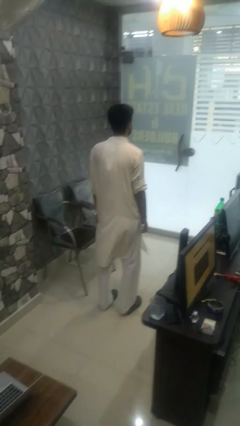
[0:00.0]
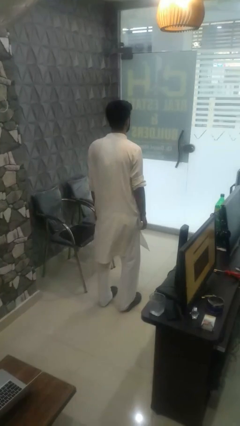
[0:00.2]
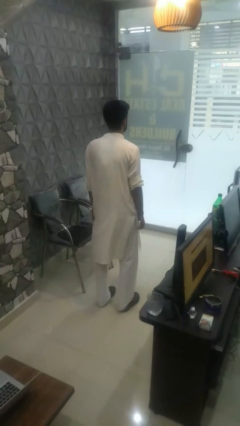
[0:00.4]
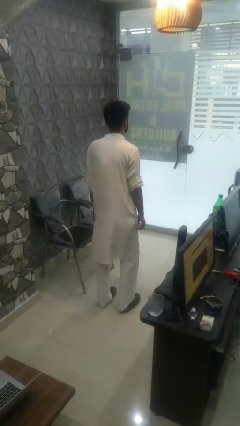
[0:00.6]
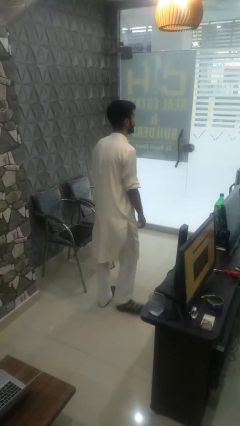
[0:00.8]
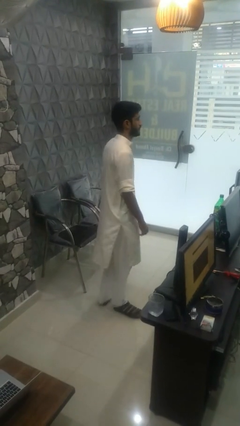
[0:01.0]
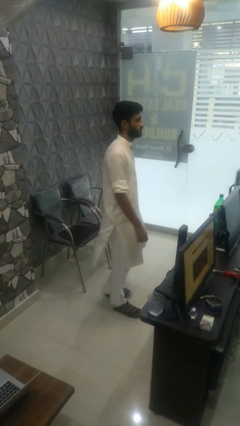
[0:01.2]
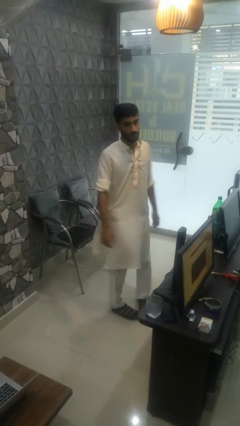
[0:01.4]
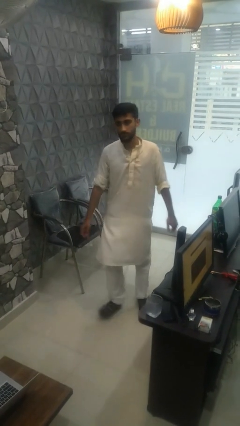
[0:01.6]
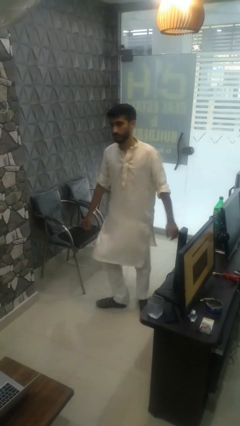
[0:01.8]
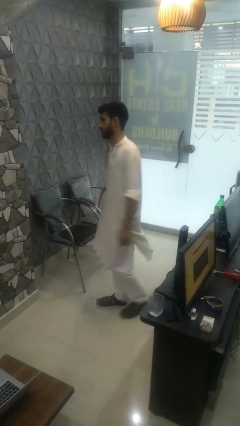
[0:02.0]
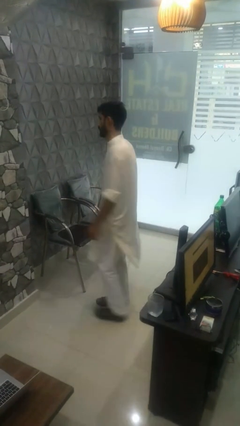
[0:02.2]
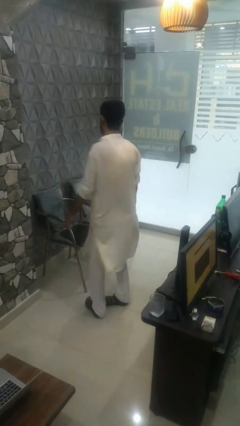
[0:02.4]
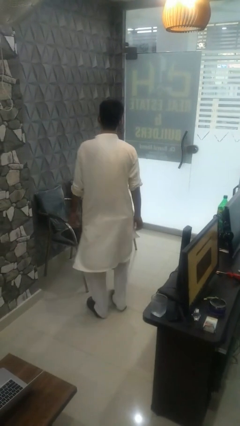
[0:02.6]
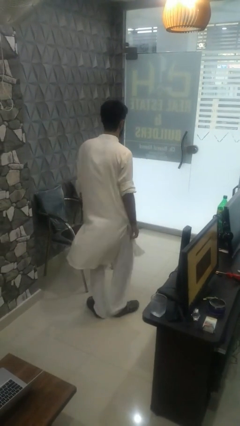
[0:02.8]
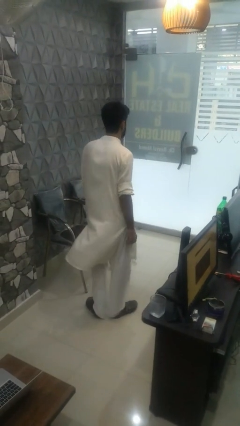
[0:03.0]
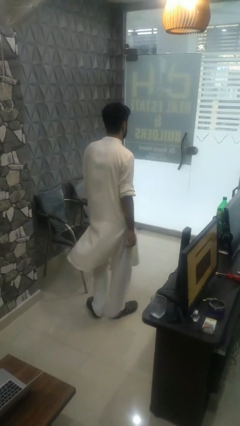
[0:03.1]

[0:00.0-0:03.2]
person twirls

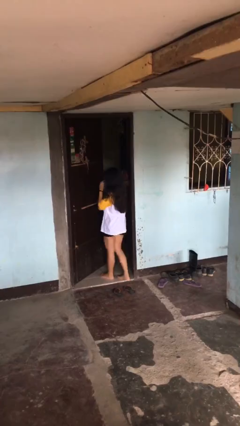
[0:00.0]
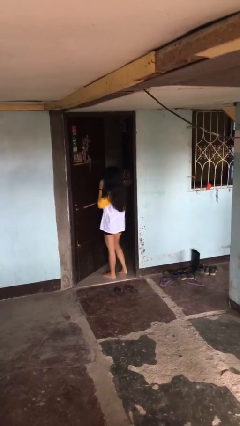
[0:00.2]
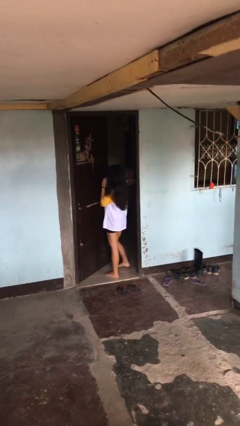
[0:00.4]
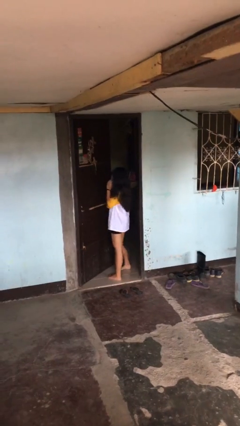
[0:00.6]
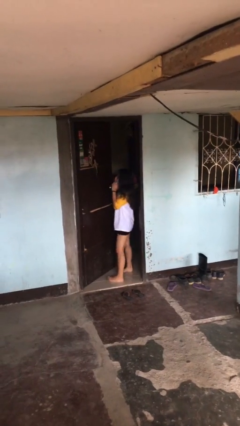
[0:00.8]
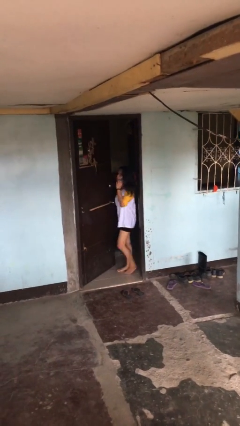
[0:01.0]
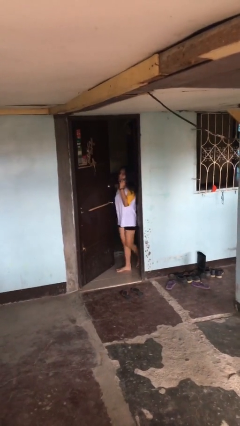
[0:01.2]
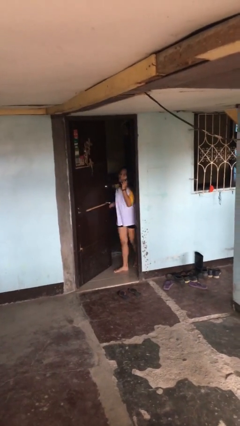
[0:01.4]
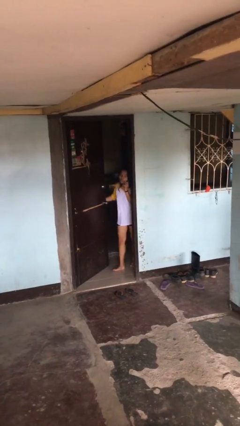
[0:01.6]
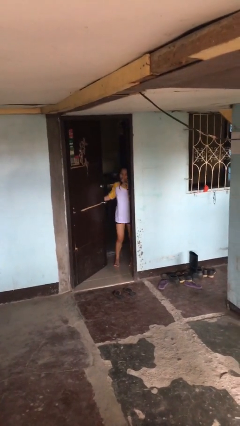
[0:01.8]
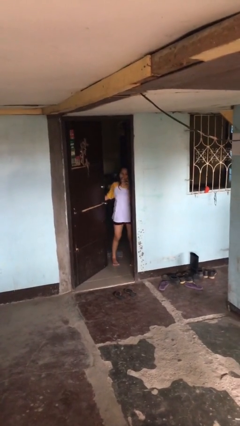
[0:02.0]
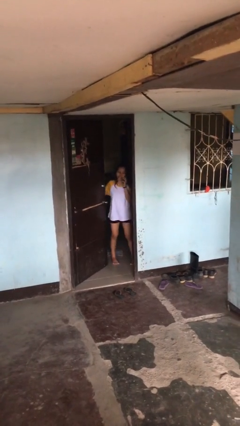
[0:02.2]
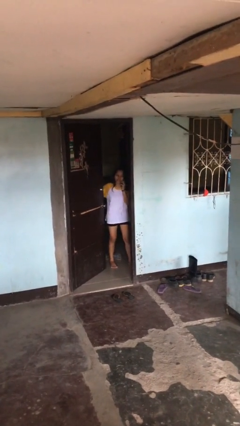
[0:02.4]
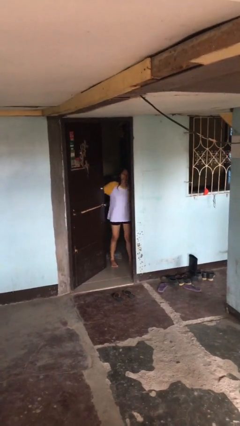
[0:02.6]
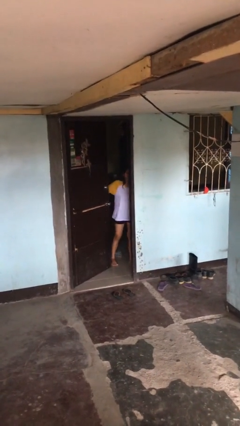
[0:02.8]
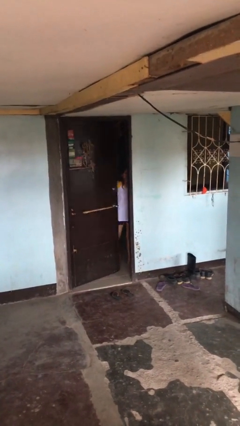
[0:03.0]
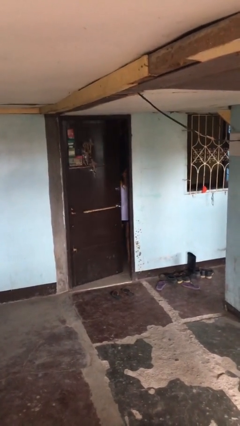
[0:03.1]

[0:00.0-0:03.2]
person exits scene through structure

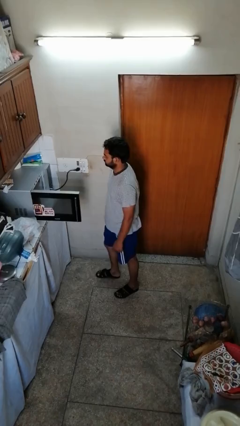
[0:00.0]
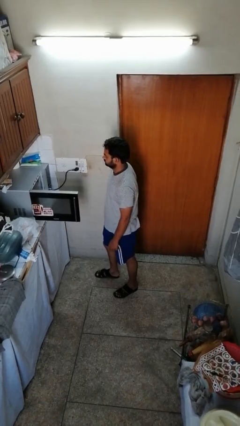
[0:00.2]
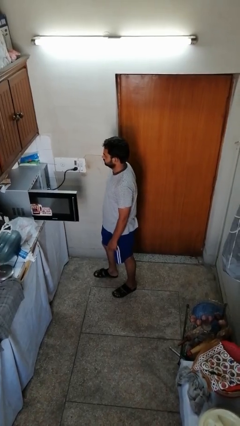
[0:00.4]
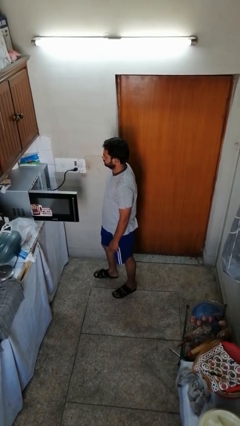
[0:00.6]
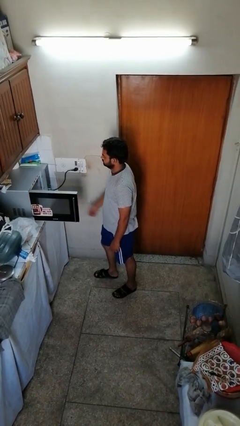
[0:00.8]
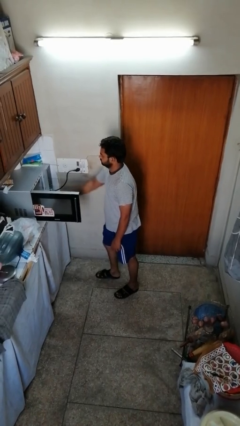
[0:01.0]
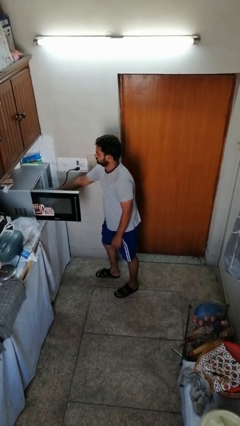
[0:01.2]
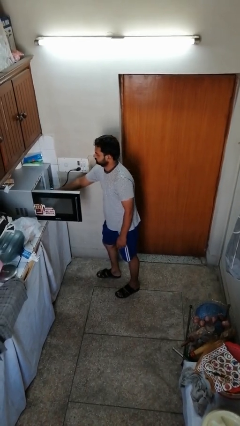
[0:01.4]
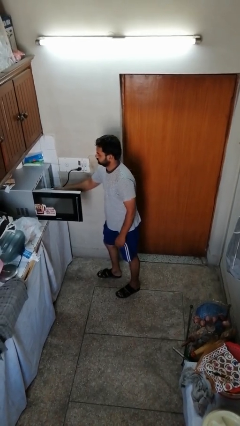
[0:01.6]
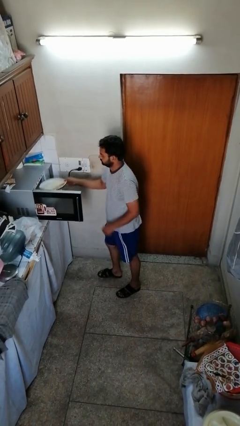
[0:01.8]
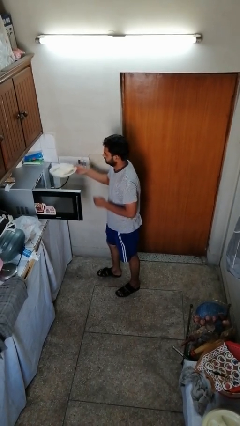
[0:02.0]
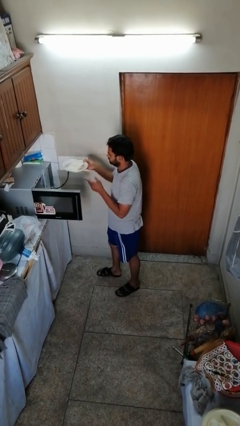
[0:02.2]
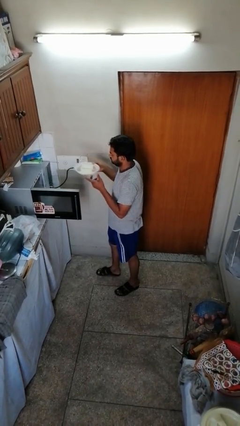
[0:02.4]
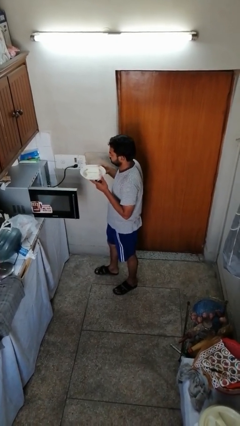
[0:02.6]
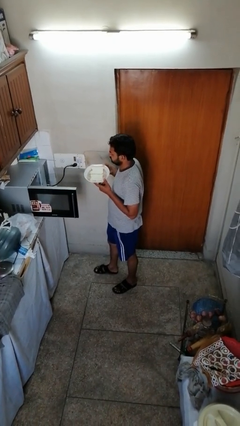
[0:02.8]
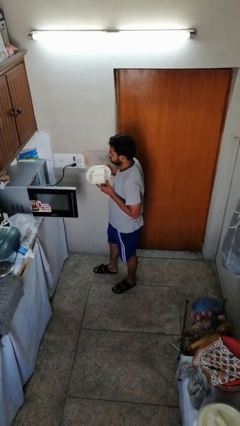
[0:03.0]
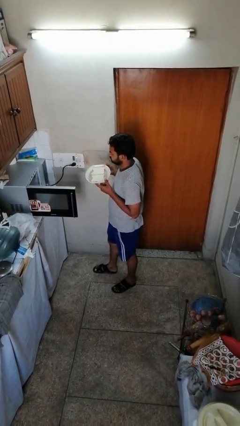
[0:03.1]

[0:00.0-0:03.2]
person takes object from oven

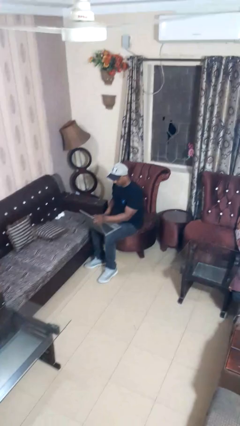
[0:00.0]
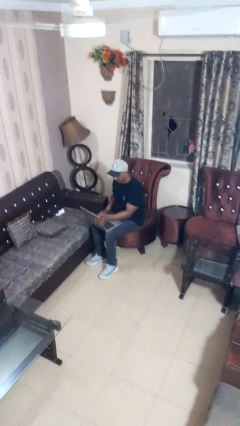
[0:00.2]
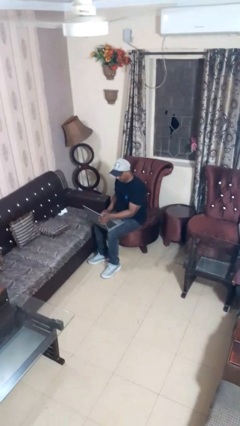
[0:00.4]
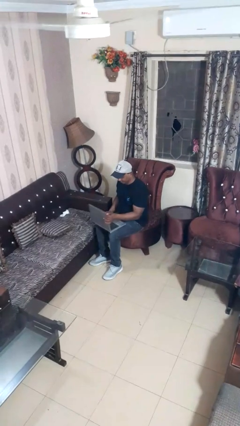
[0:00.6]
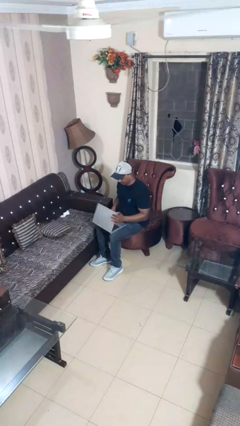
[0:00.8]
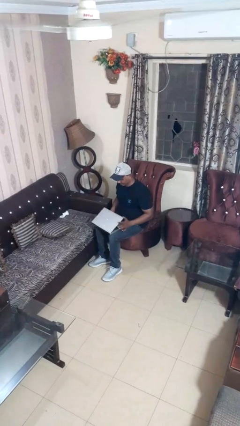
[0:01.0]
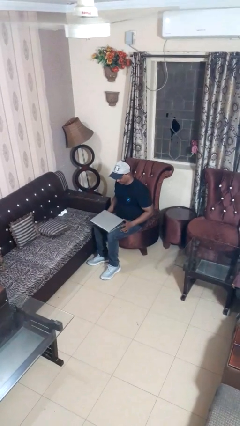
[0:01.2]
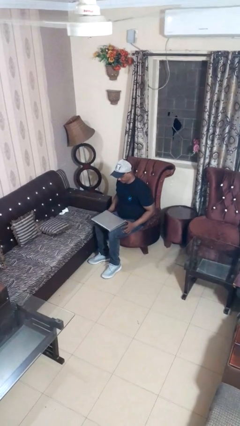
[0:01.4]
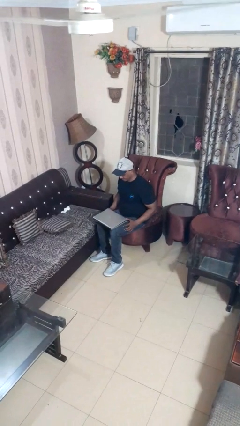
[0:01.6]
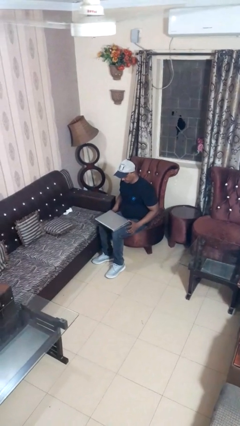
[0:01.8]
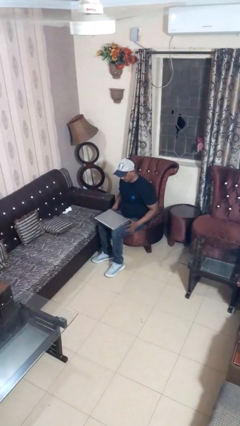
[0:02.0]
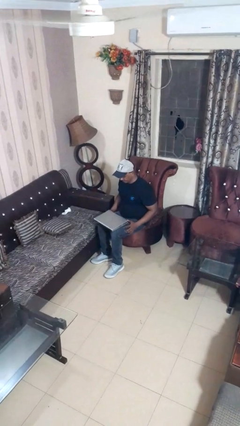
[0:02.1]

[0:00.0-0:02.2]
person closes laptop

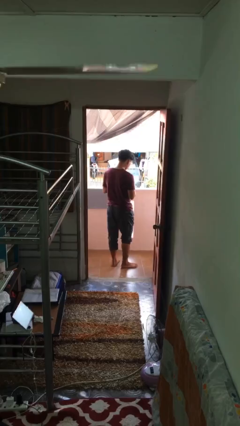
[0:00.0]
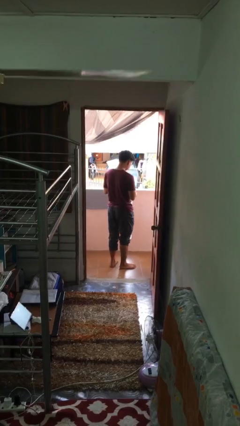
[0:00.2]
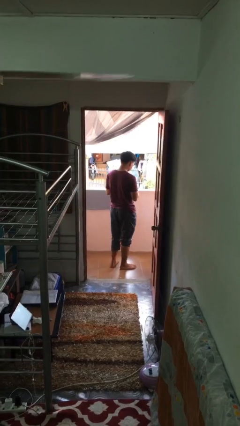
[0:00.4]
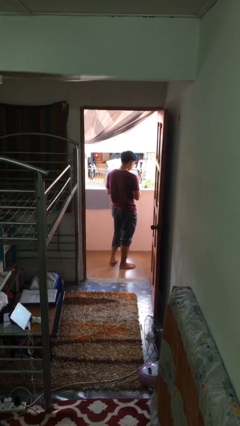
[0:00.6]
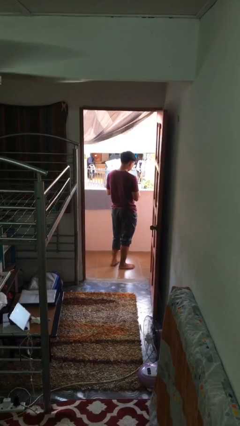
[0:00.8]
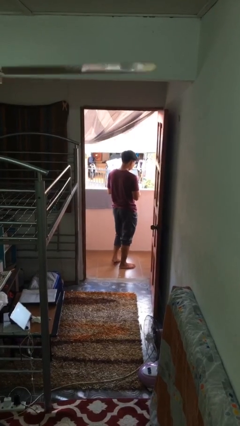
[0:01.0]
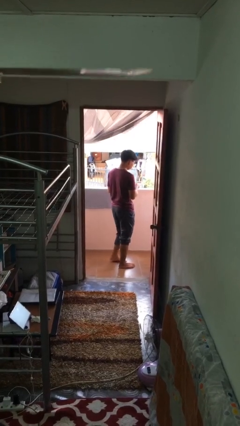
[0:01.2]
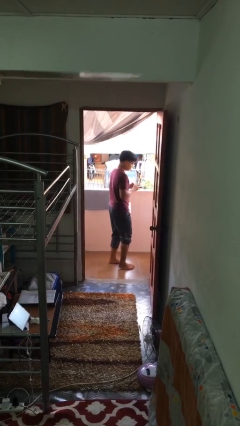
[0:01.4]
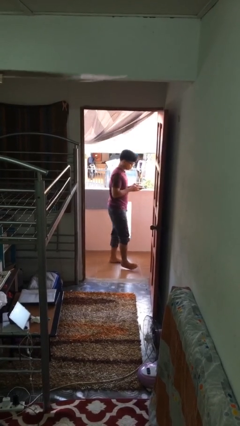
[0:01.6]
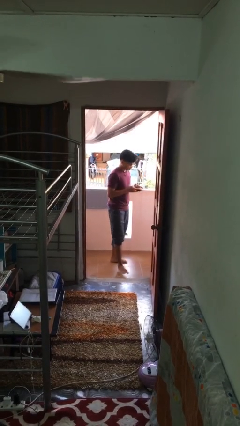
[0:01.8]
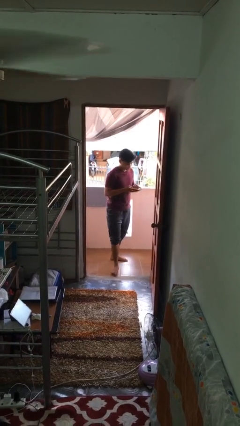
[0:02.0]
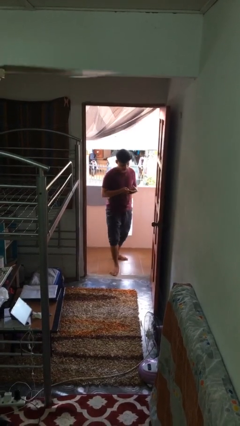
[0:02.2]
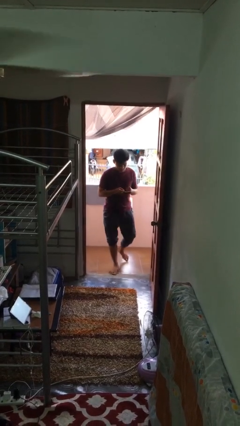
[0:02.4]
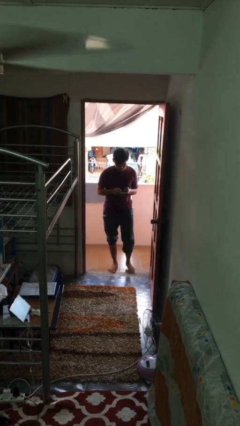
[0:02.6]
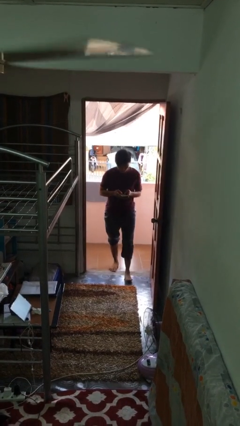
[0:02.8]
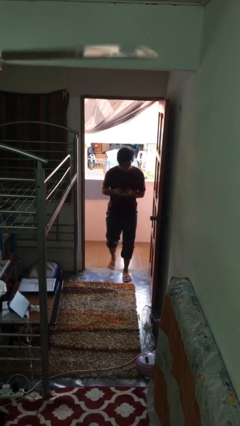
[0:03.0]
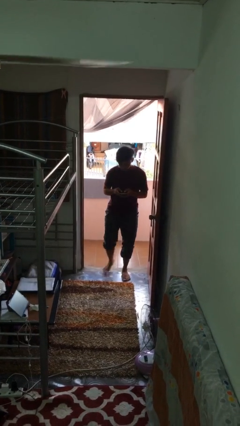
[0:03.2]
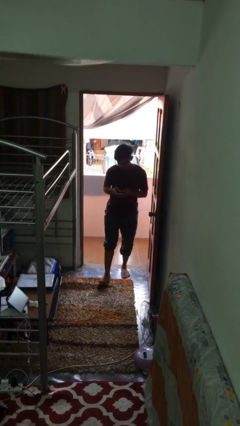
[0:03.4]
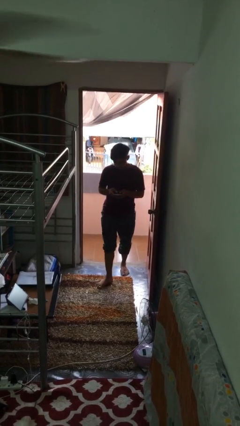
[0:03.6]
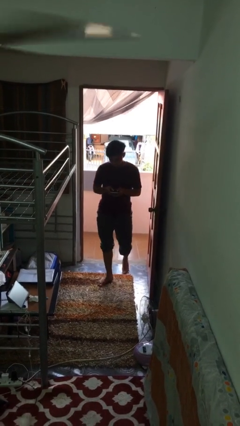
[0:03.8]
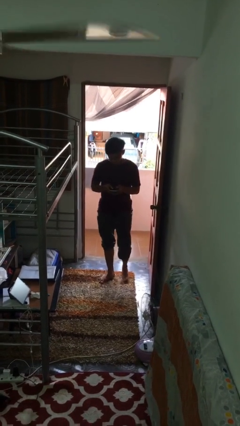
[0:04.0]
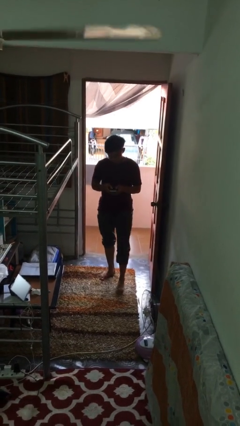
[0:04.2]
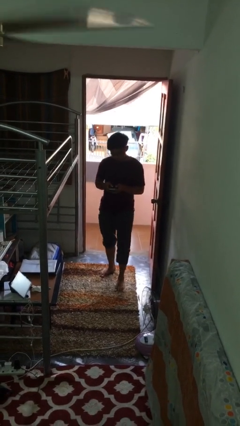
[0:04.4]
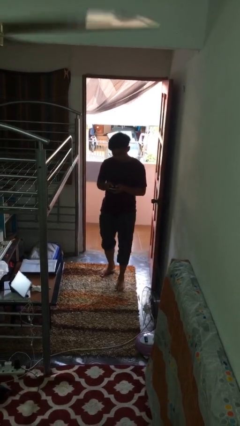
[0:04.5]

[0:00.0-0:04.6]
person enters scene through structure

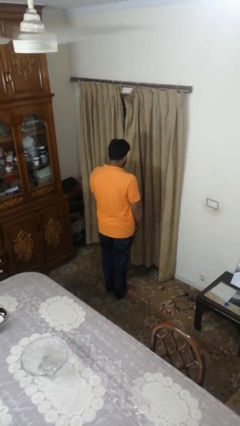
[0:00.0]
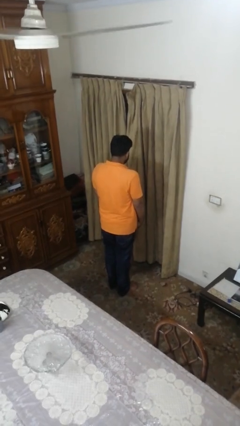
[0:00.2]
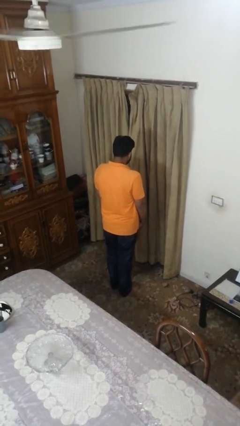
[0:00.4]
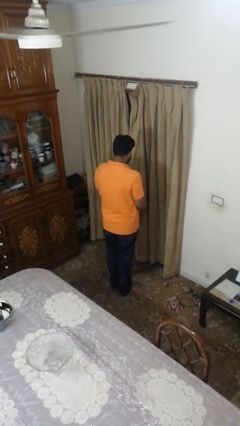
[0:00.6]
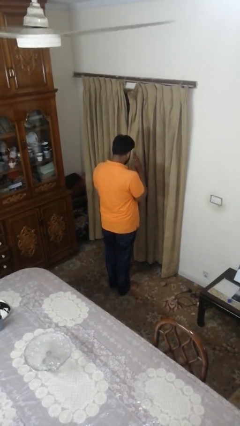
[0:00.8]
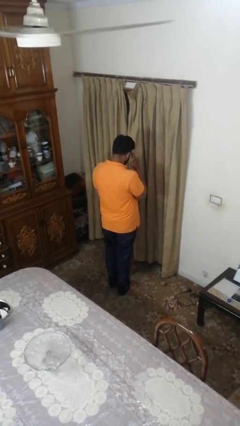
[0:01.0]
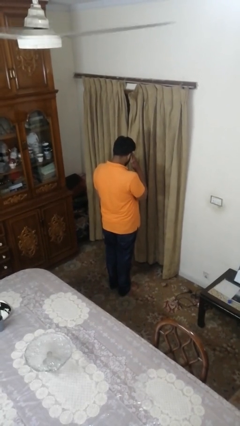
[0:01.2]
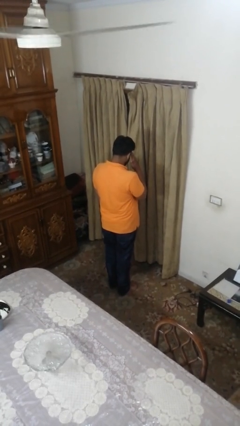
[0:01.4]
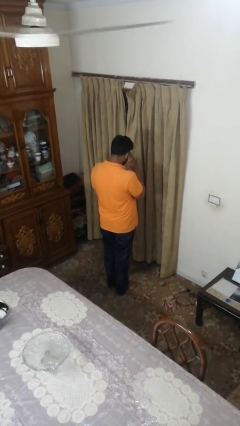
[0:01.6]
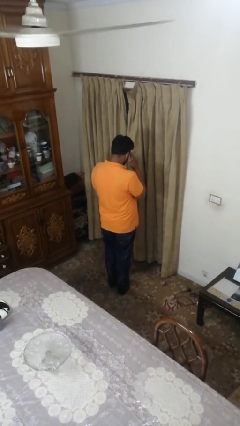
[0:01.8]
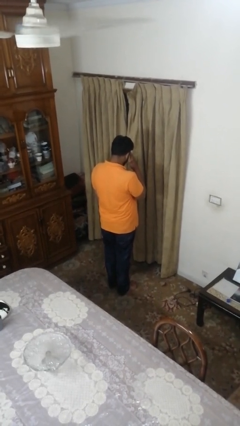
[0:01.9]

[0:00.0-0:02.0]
person salutes
